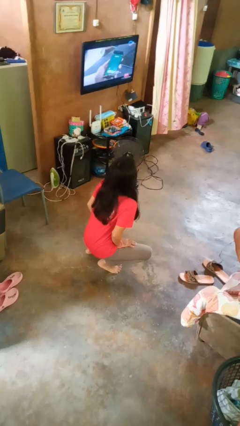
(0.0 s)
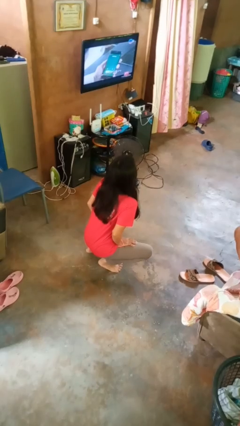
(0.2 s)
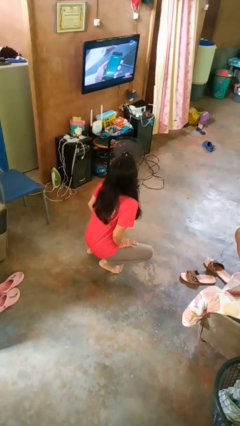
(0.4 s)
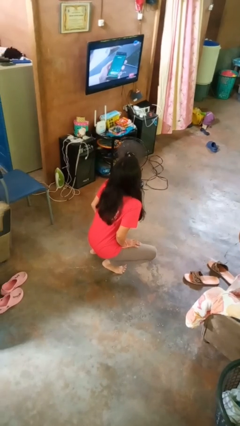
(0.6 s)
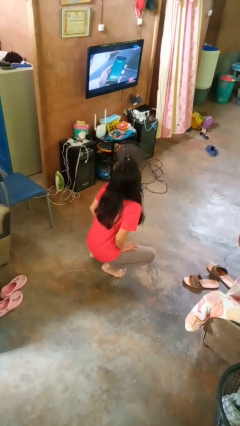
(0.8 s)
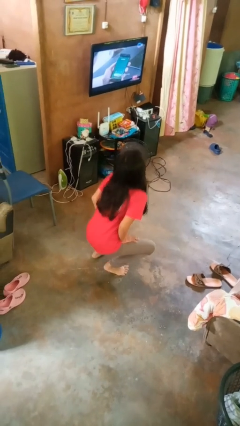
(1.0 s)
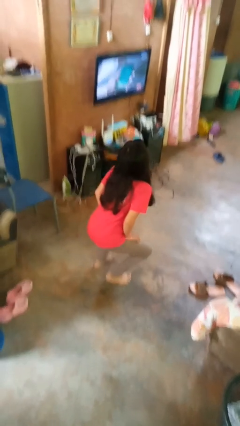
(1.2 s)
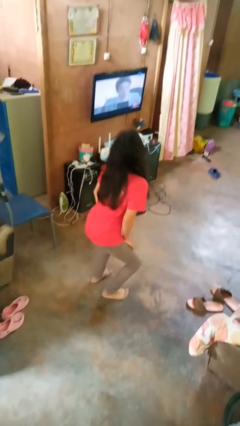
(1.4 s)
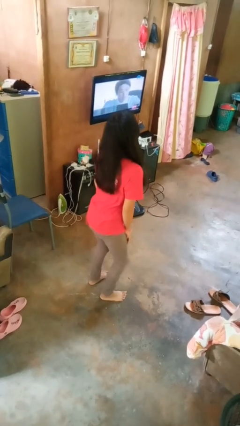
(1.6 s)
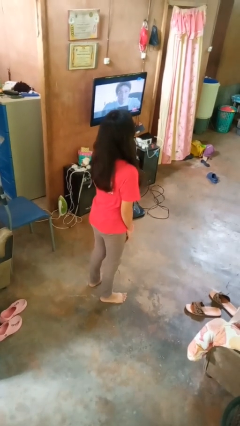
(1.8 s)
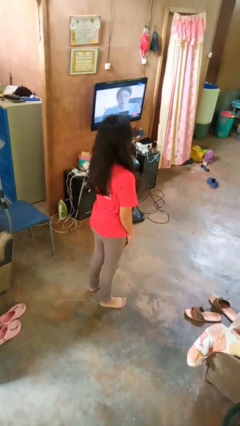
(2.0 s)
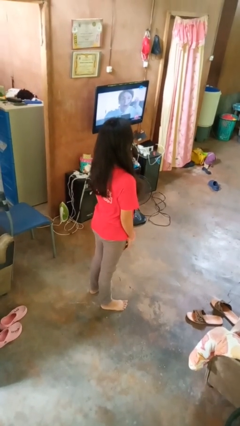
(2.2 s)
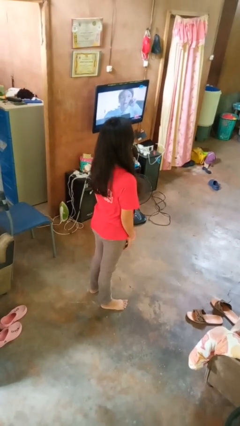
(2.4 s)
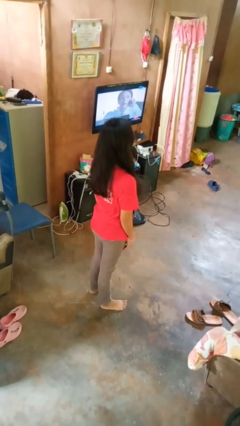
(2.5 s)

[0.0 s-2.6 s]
person stands up

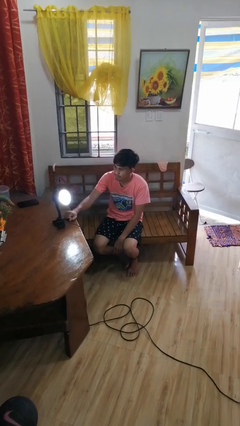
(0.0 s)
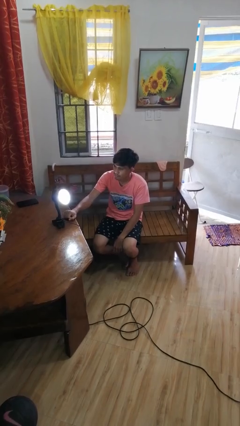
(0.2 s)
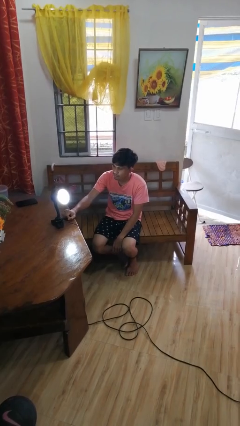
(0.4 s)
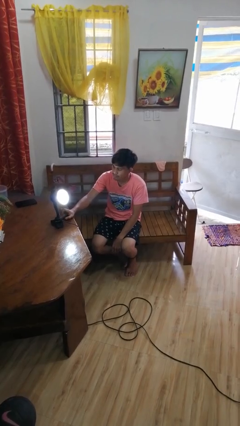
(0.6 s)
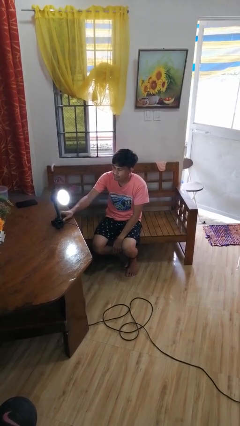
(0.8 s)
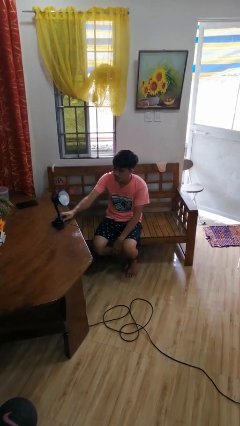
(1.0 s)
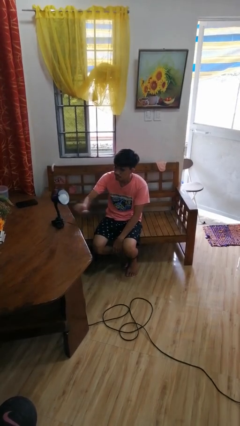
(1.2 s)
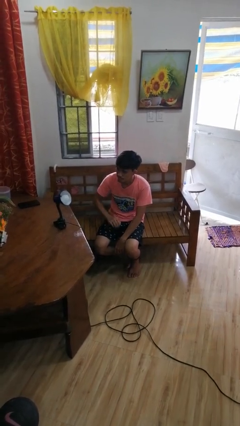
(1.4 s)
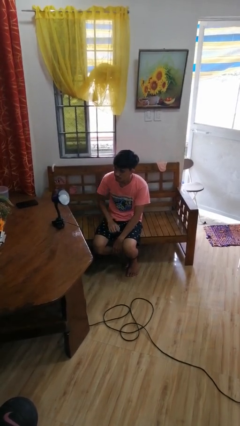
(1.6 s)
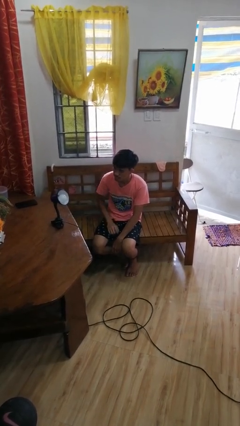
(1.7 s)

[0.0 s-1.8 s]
person turns off lamp

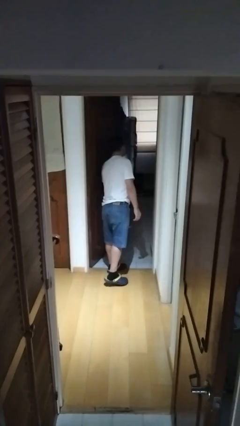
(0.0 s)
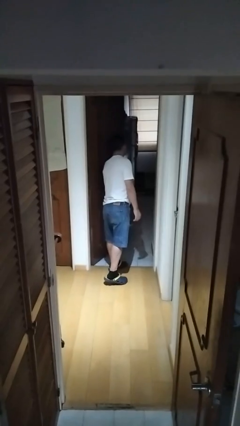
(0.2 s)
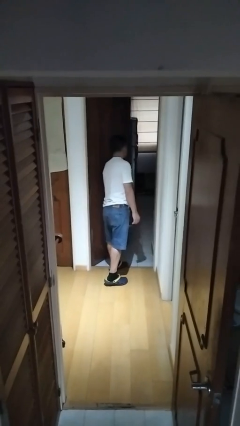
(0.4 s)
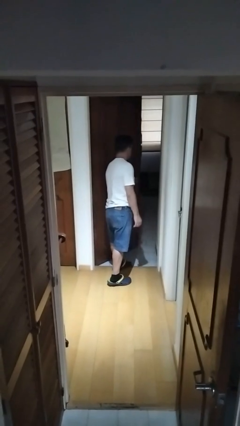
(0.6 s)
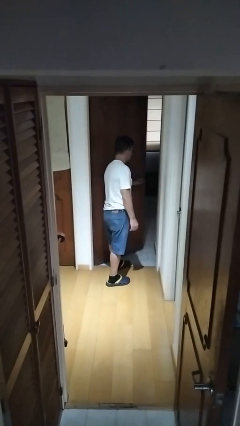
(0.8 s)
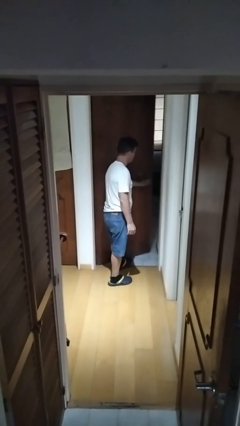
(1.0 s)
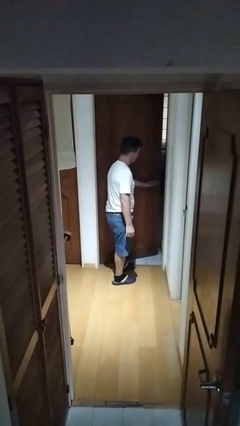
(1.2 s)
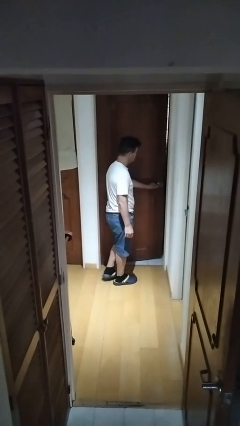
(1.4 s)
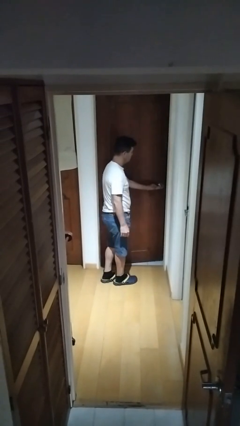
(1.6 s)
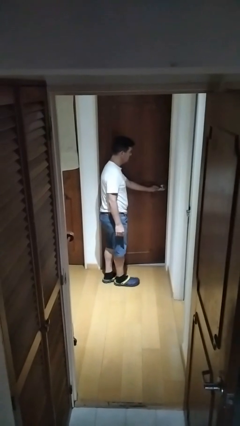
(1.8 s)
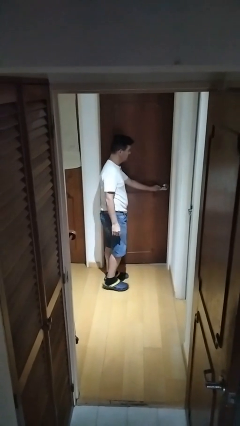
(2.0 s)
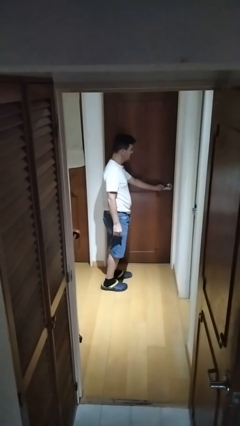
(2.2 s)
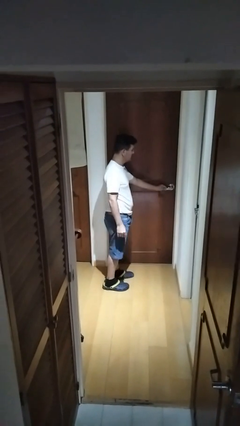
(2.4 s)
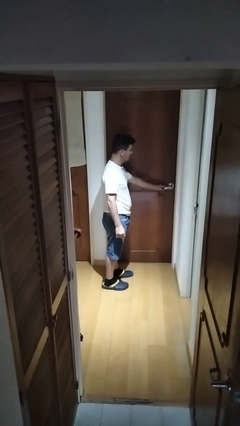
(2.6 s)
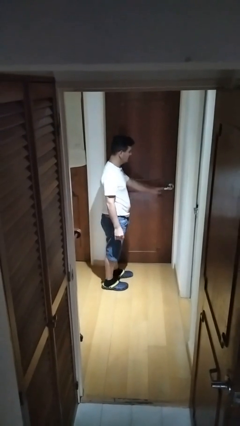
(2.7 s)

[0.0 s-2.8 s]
person closes facility door

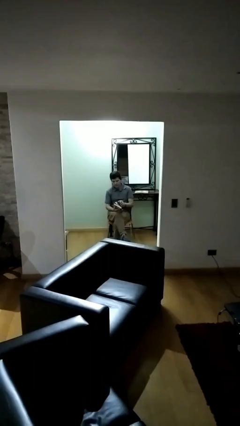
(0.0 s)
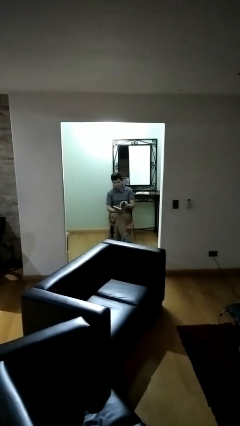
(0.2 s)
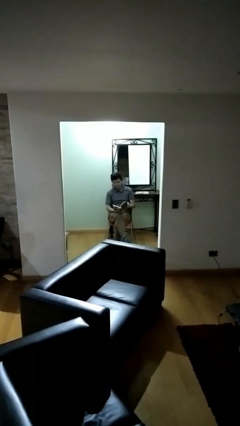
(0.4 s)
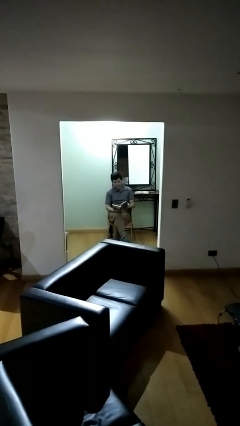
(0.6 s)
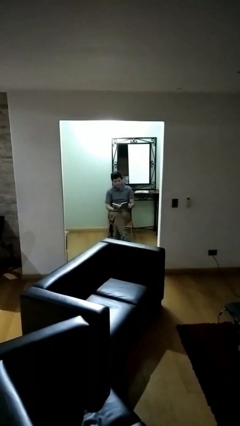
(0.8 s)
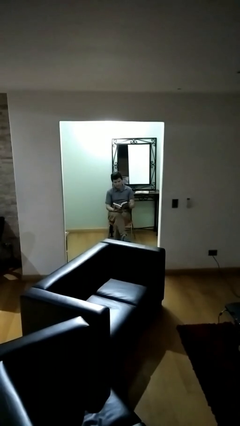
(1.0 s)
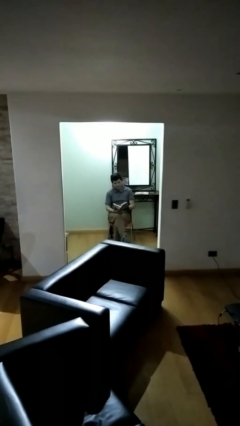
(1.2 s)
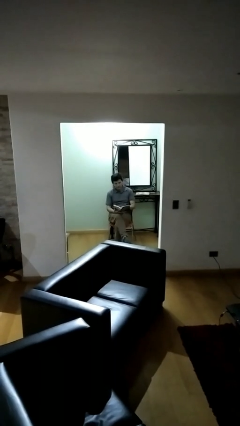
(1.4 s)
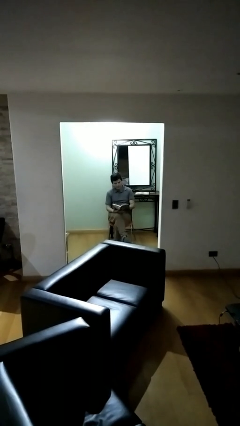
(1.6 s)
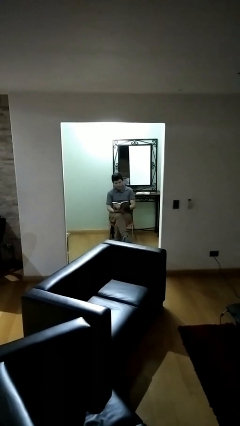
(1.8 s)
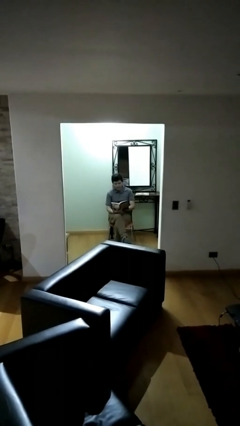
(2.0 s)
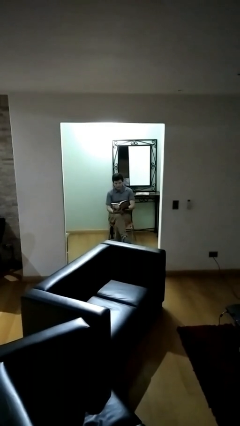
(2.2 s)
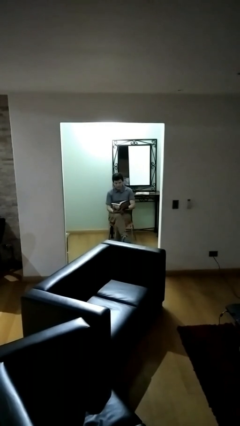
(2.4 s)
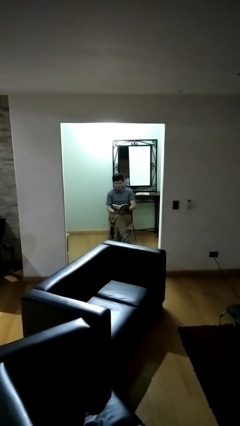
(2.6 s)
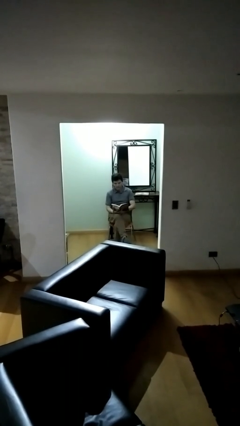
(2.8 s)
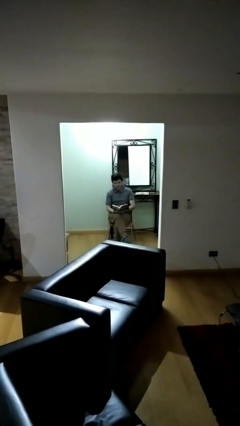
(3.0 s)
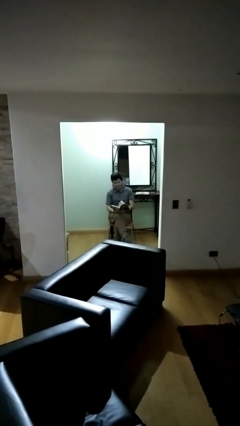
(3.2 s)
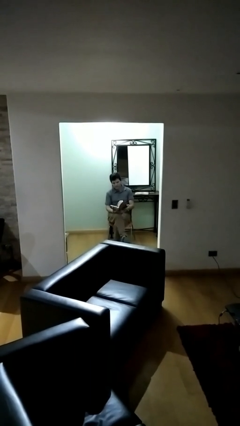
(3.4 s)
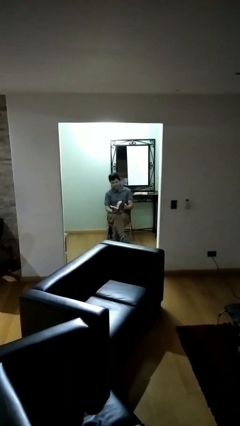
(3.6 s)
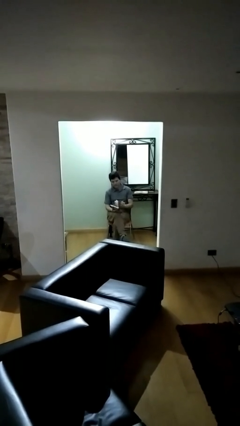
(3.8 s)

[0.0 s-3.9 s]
person reads document

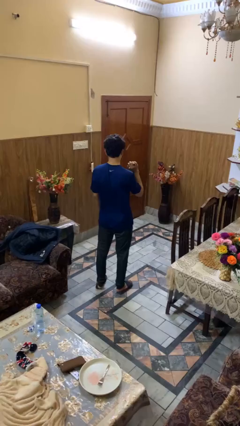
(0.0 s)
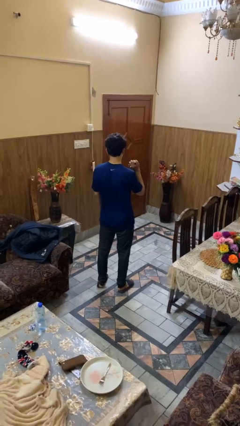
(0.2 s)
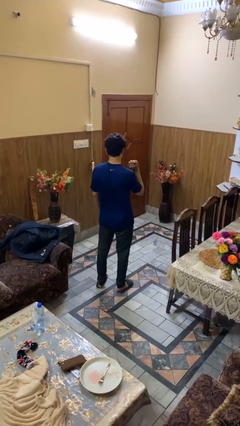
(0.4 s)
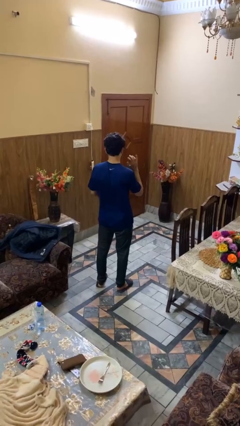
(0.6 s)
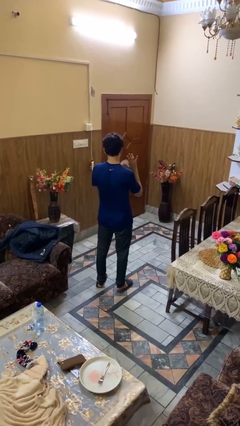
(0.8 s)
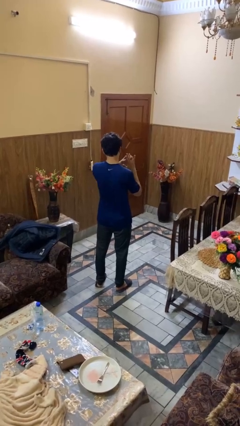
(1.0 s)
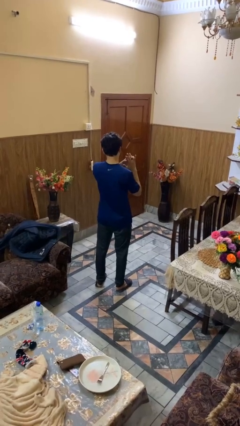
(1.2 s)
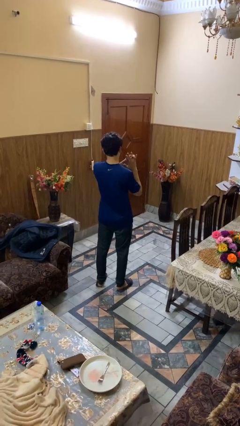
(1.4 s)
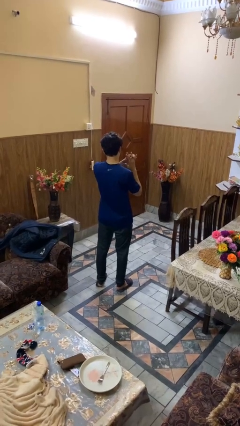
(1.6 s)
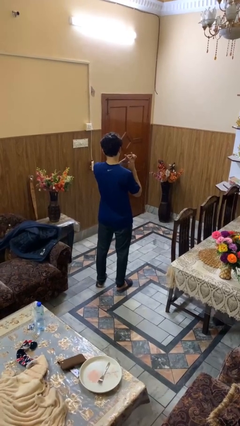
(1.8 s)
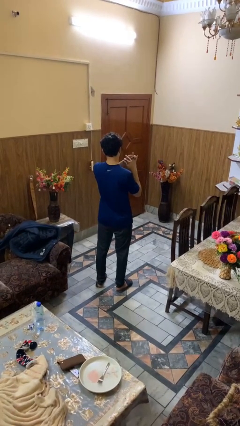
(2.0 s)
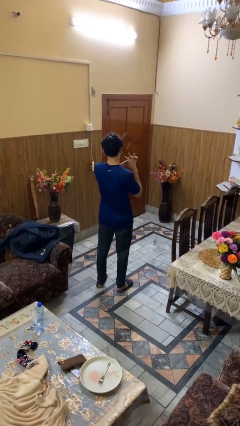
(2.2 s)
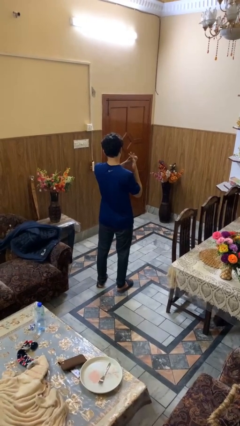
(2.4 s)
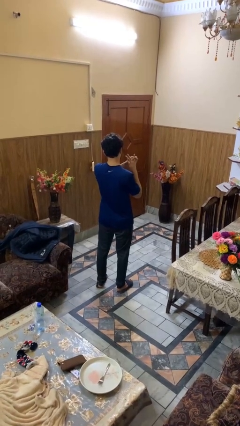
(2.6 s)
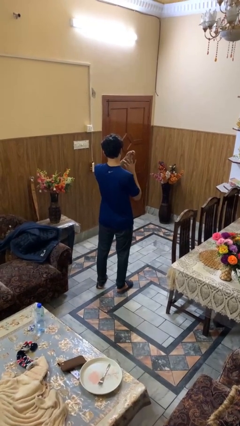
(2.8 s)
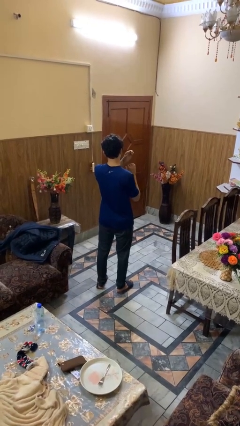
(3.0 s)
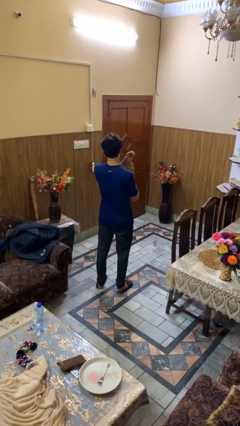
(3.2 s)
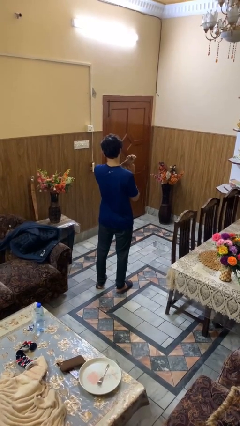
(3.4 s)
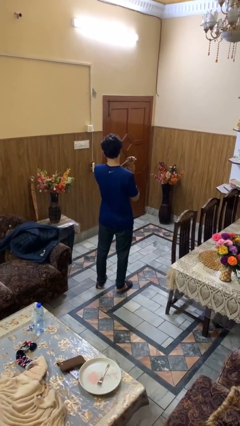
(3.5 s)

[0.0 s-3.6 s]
person takes off ring

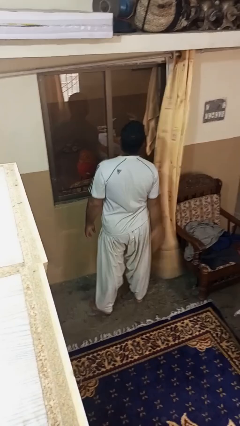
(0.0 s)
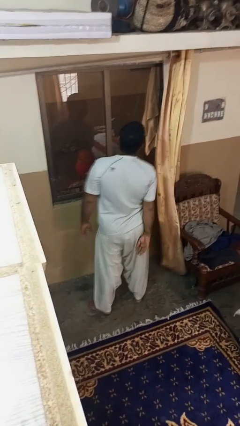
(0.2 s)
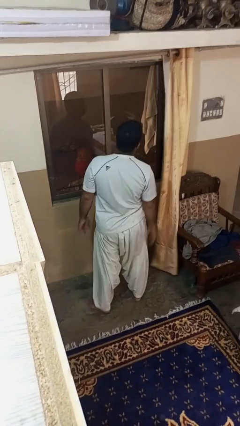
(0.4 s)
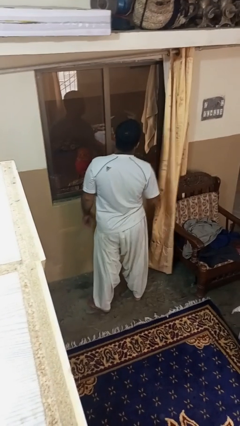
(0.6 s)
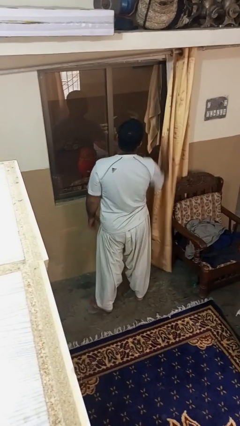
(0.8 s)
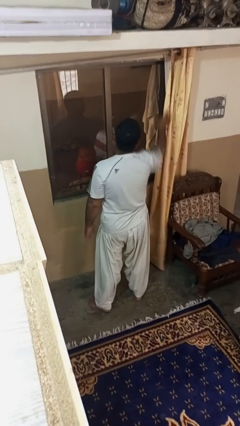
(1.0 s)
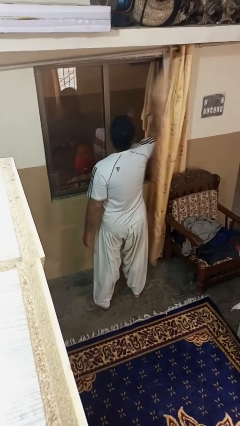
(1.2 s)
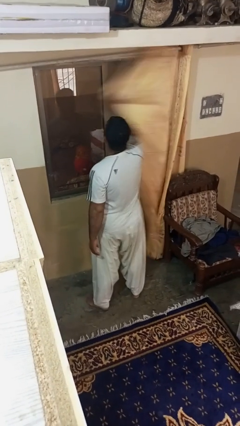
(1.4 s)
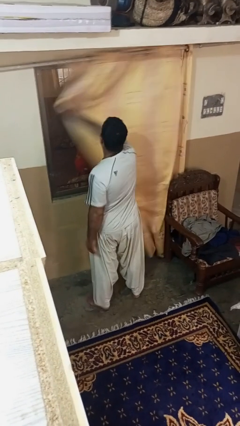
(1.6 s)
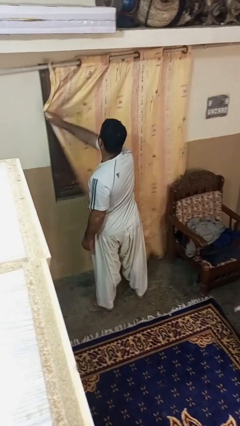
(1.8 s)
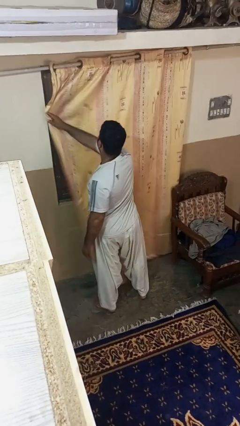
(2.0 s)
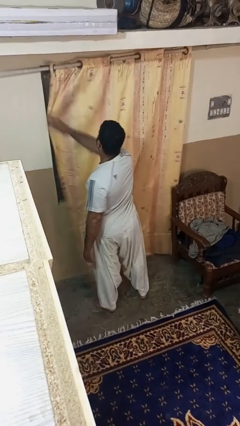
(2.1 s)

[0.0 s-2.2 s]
person closes curtains

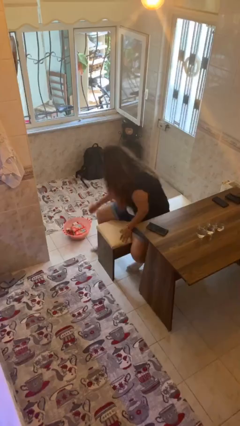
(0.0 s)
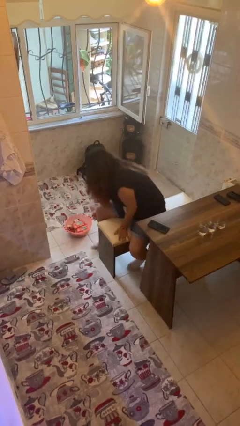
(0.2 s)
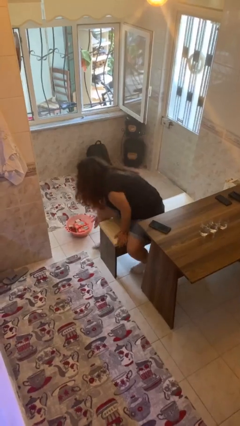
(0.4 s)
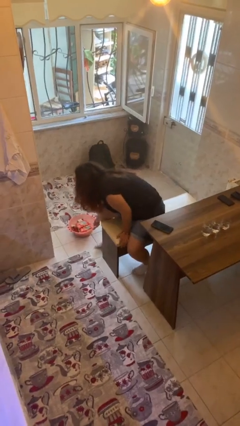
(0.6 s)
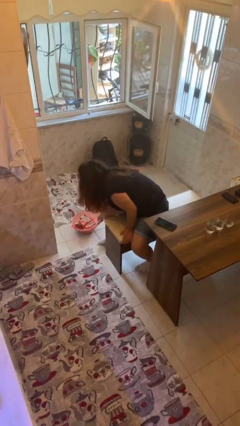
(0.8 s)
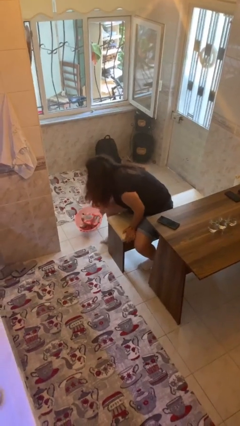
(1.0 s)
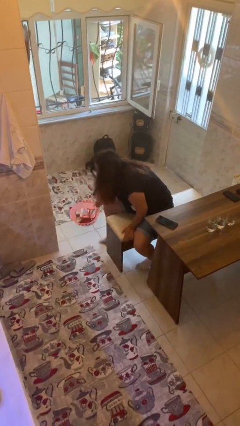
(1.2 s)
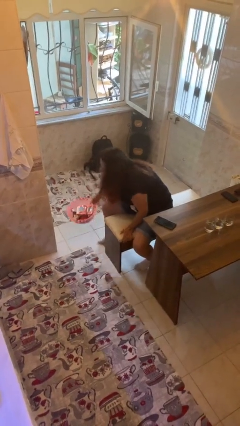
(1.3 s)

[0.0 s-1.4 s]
person picks up object from floor
